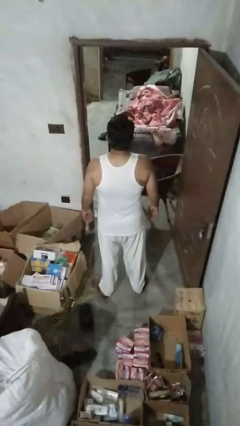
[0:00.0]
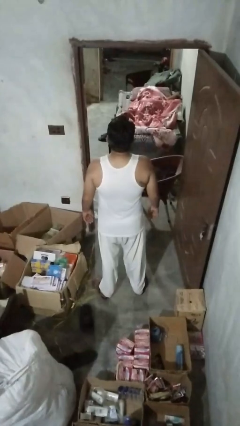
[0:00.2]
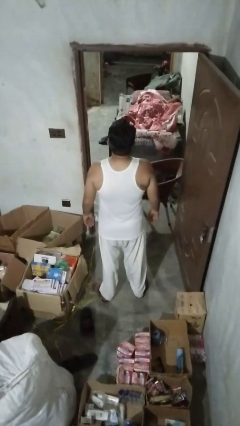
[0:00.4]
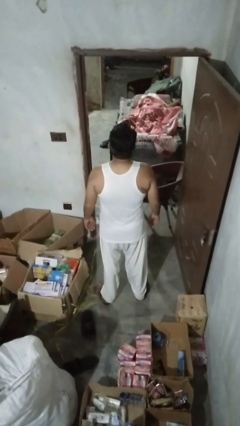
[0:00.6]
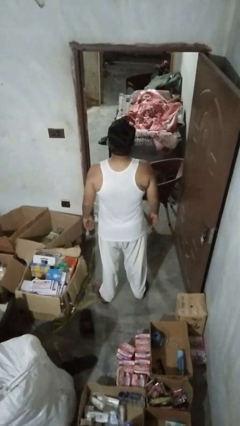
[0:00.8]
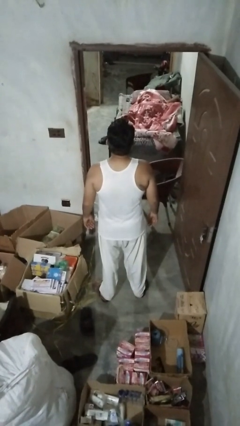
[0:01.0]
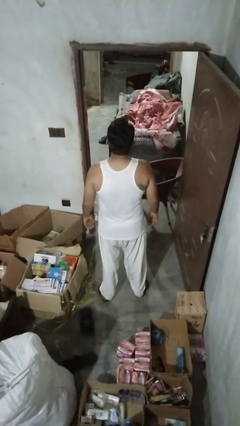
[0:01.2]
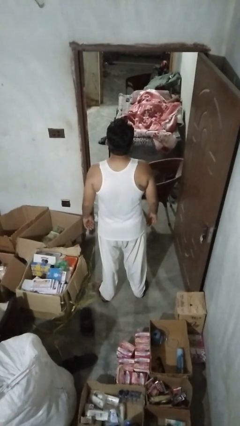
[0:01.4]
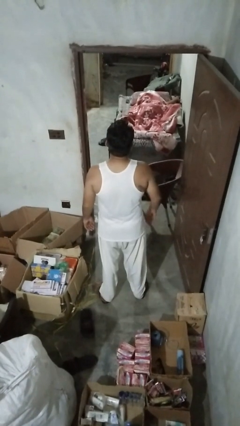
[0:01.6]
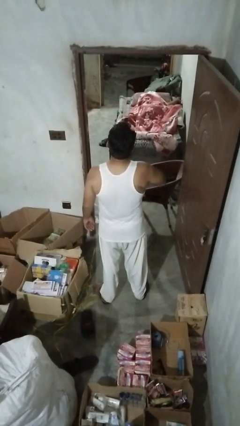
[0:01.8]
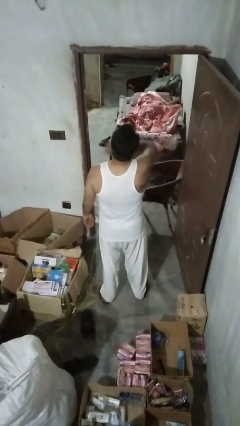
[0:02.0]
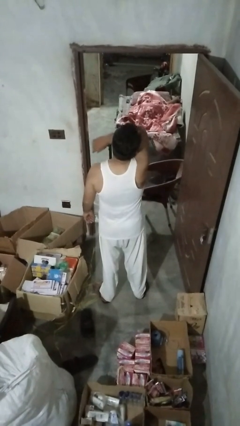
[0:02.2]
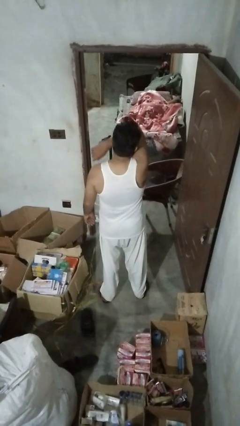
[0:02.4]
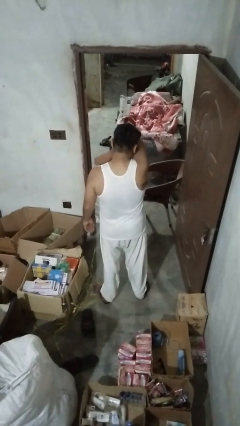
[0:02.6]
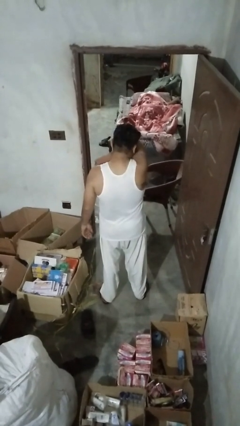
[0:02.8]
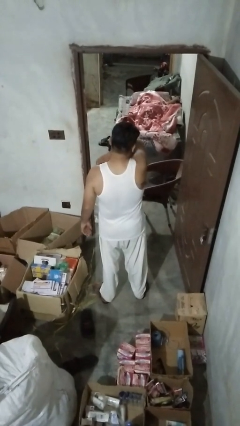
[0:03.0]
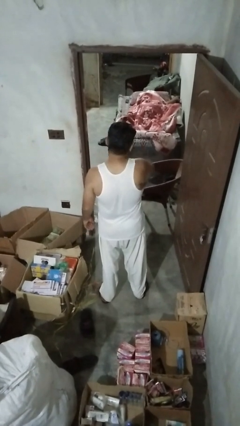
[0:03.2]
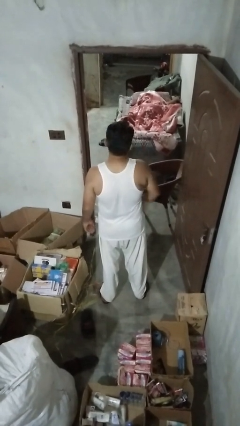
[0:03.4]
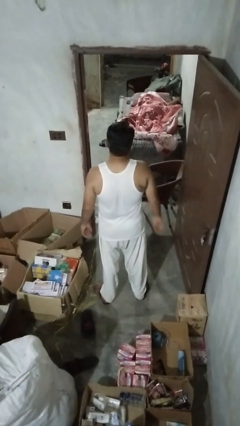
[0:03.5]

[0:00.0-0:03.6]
person sneezes into arm

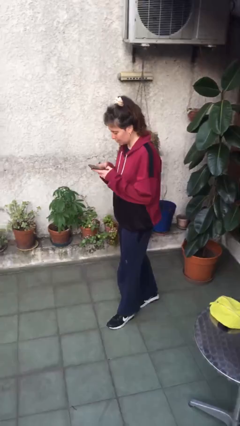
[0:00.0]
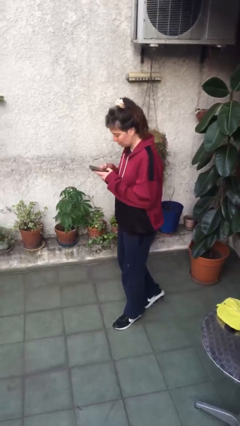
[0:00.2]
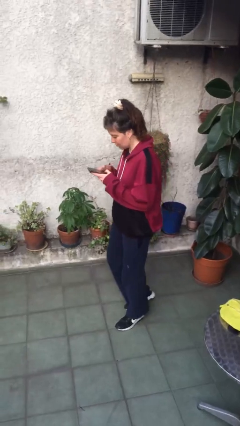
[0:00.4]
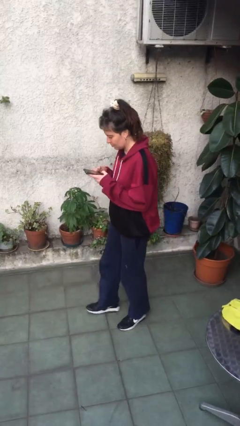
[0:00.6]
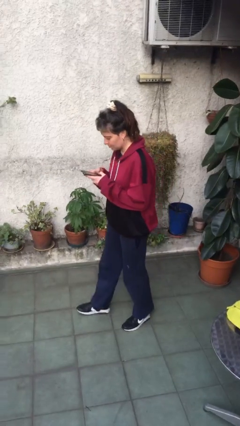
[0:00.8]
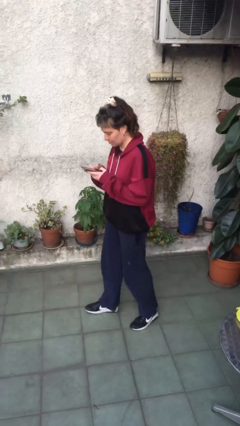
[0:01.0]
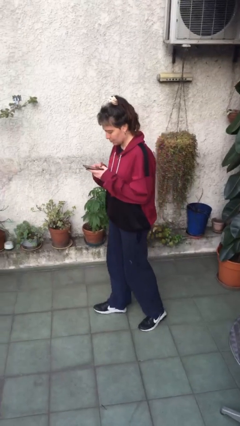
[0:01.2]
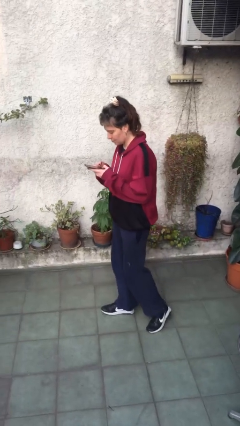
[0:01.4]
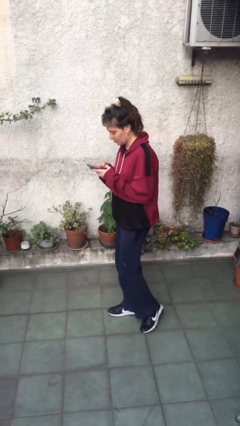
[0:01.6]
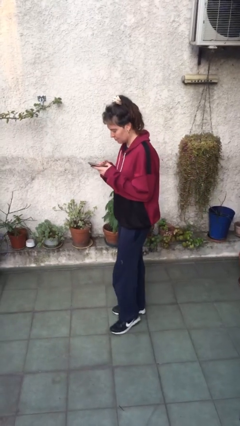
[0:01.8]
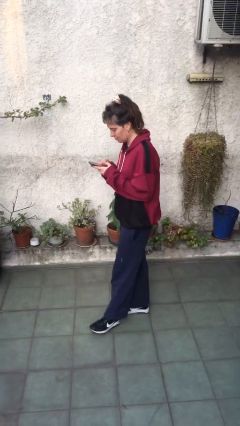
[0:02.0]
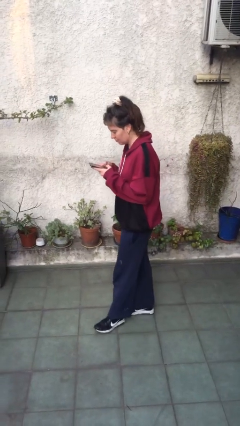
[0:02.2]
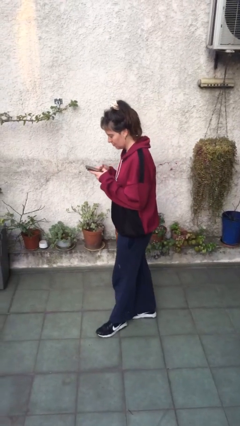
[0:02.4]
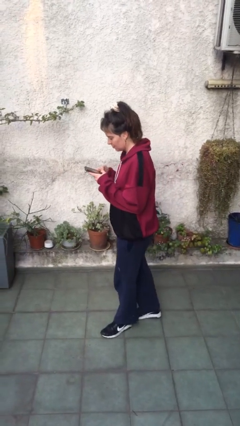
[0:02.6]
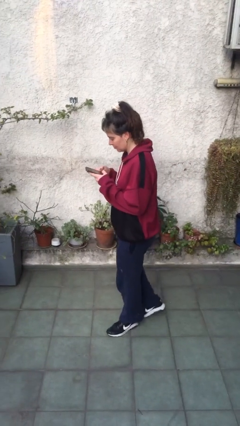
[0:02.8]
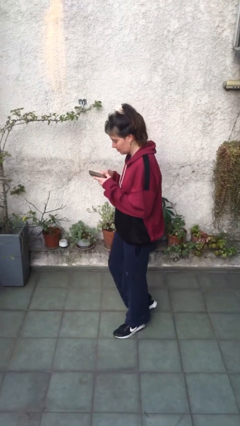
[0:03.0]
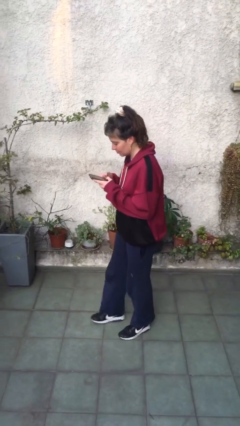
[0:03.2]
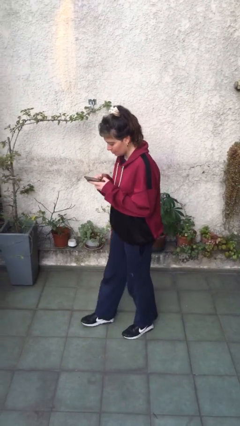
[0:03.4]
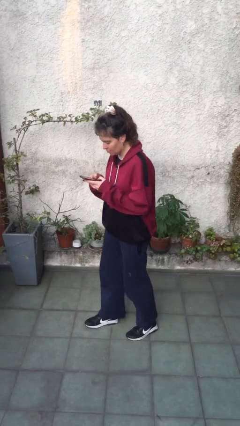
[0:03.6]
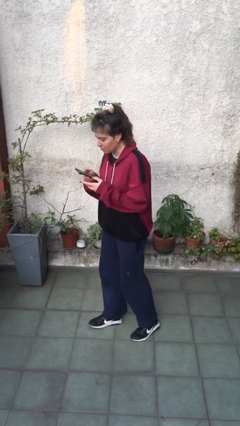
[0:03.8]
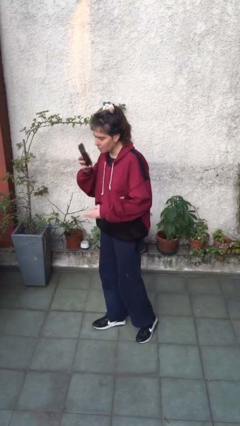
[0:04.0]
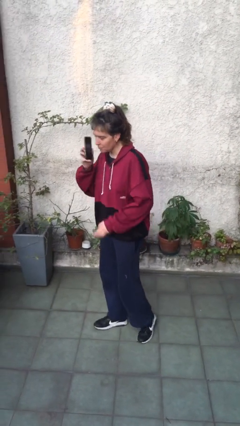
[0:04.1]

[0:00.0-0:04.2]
person texts on phone

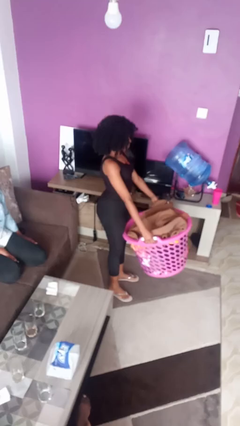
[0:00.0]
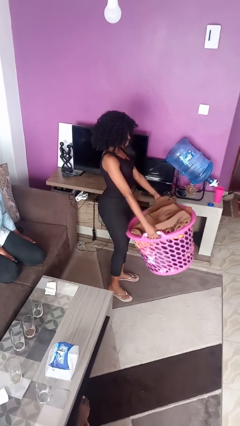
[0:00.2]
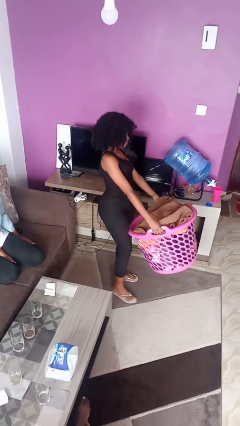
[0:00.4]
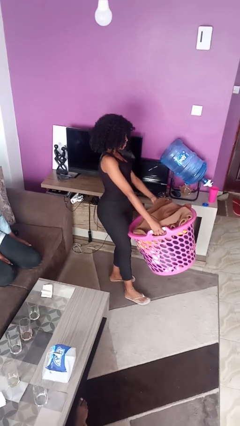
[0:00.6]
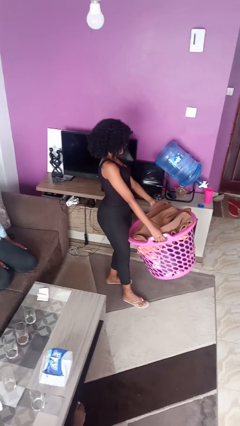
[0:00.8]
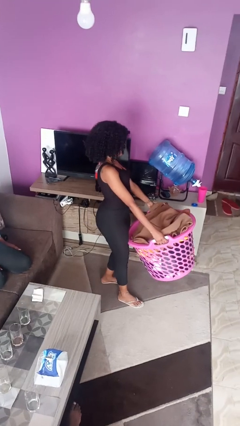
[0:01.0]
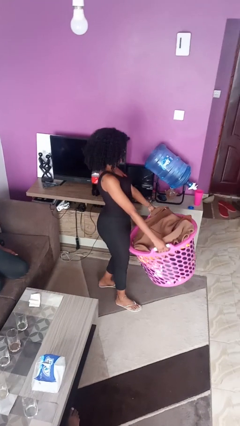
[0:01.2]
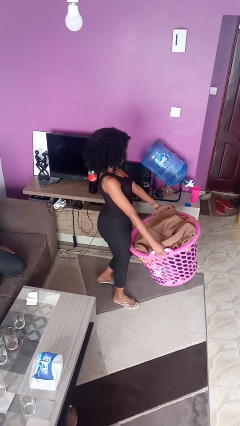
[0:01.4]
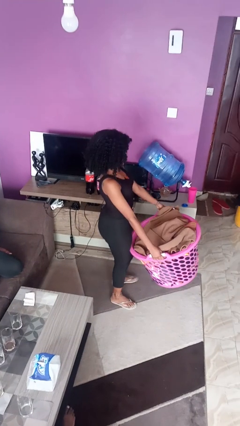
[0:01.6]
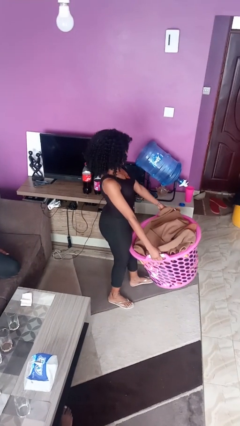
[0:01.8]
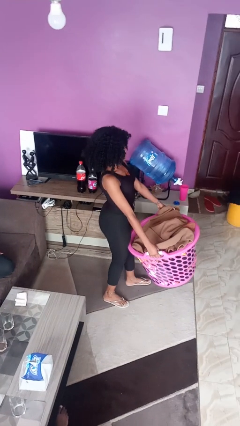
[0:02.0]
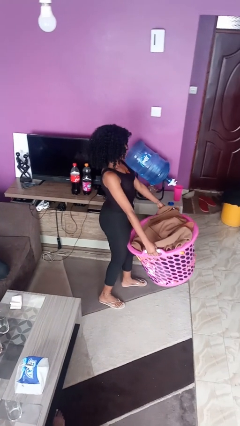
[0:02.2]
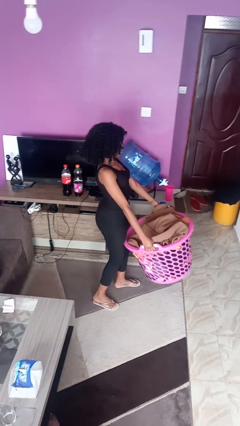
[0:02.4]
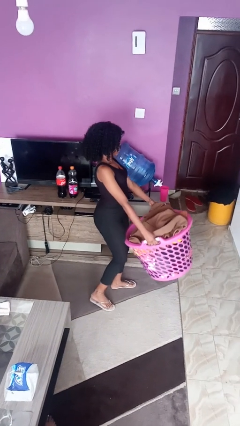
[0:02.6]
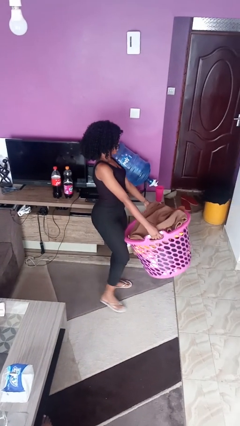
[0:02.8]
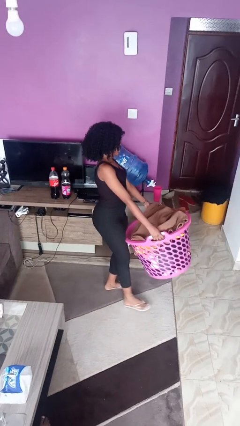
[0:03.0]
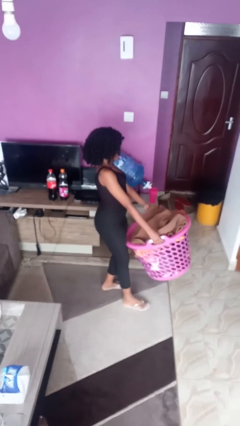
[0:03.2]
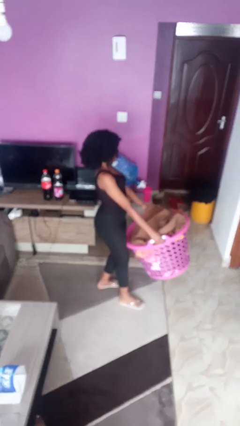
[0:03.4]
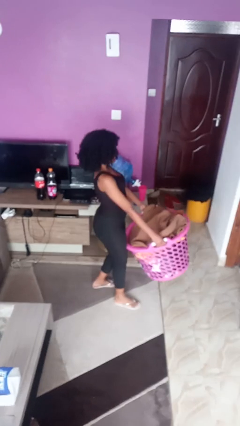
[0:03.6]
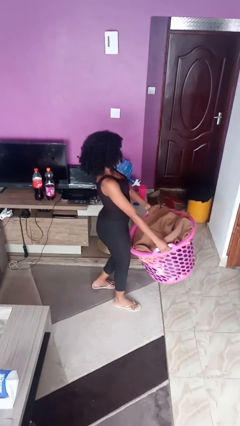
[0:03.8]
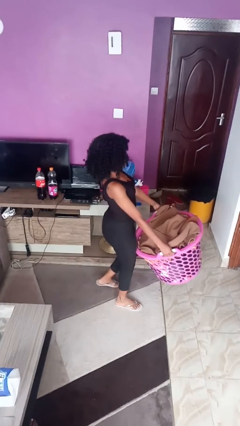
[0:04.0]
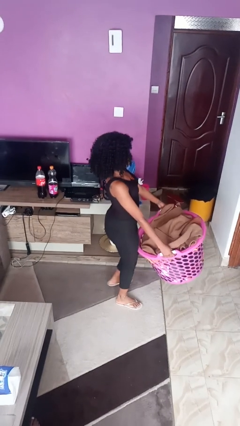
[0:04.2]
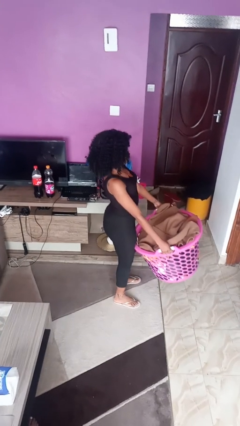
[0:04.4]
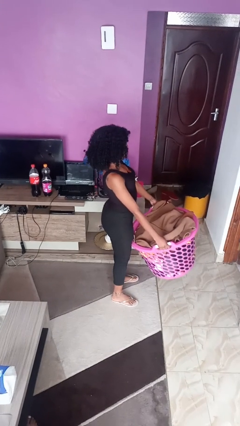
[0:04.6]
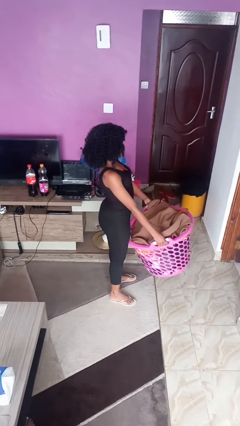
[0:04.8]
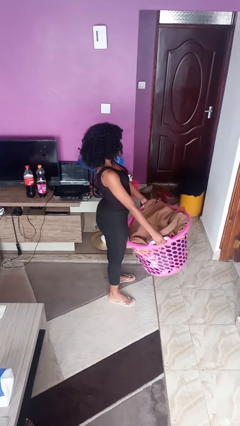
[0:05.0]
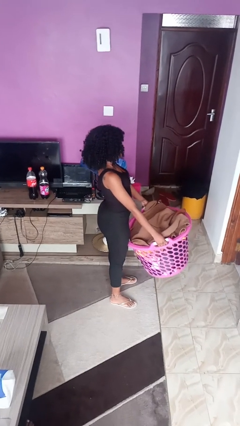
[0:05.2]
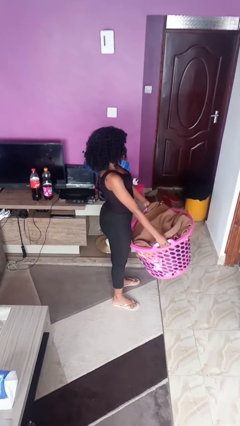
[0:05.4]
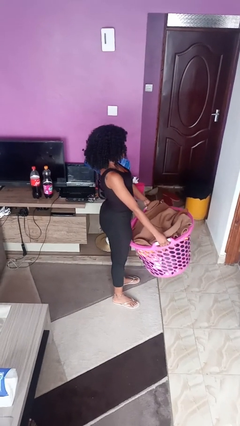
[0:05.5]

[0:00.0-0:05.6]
person carries laundry basket

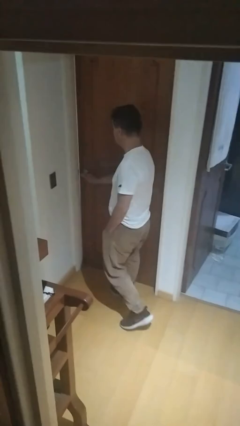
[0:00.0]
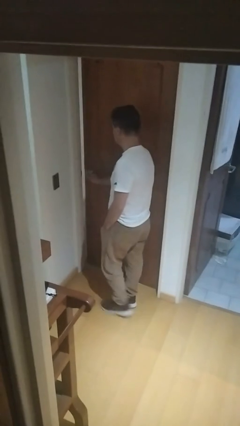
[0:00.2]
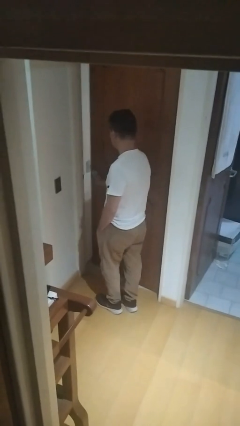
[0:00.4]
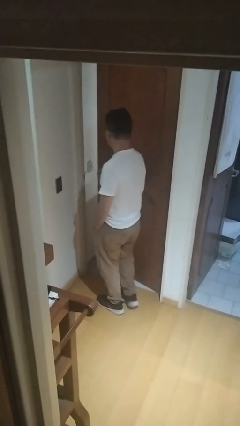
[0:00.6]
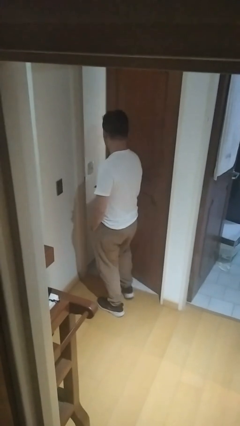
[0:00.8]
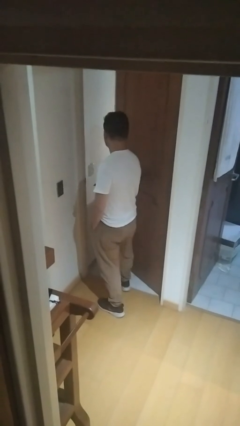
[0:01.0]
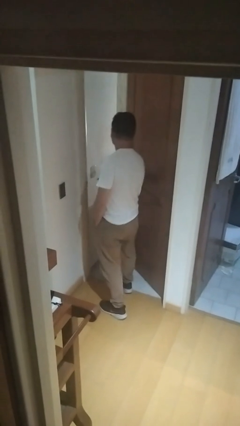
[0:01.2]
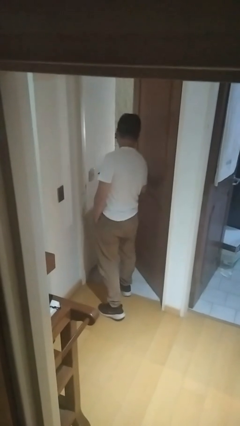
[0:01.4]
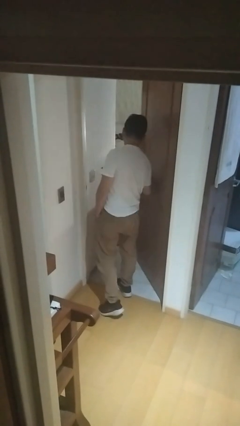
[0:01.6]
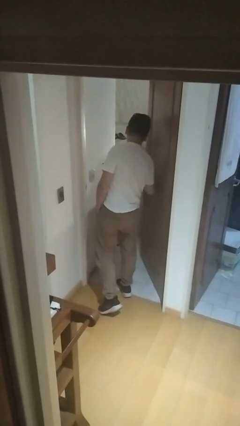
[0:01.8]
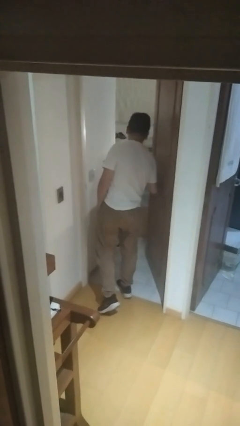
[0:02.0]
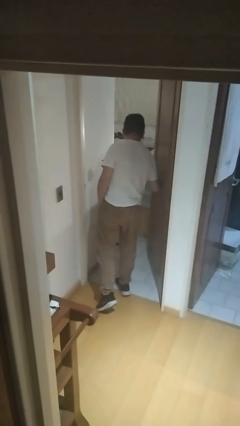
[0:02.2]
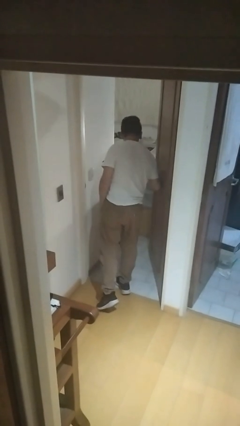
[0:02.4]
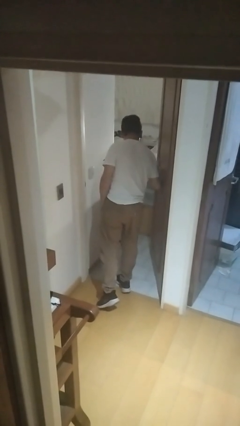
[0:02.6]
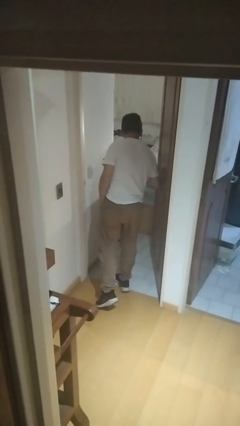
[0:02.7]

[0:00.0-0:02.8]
person opens facility door

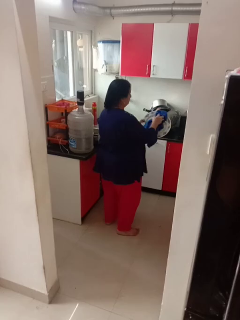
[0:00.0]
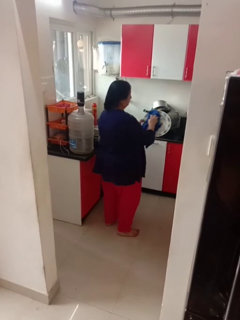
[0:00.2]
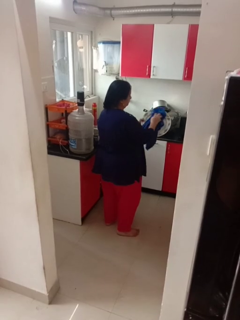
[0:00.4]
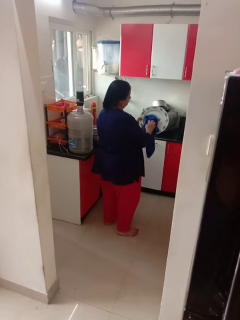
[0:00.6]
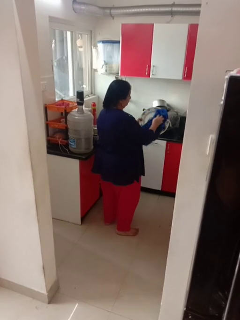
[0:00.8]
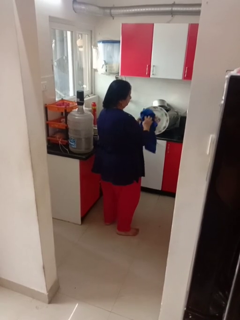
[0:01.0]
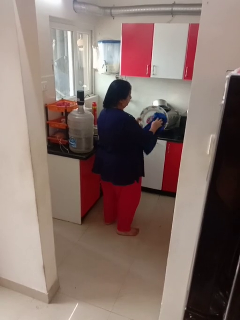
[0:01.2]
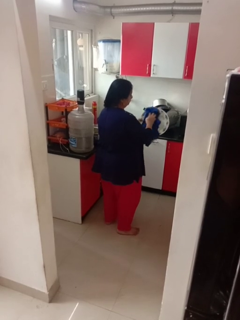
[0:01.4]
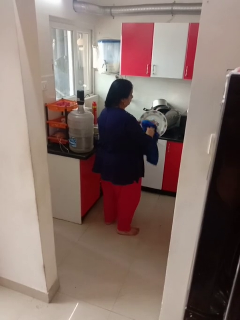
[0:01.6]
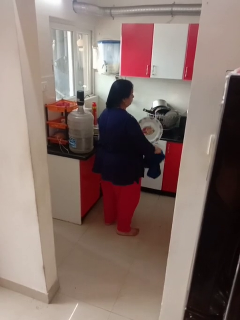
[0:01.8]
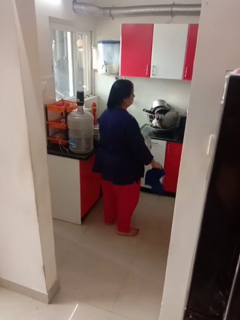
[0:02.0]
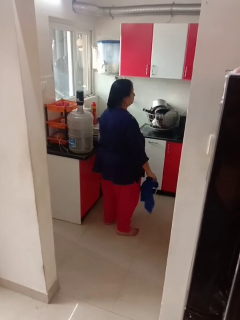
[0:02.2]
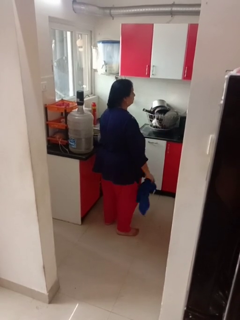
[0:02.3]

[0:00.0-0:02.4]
person dries dish
